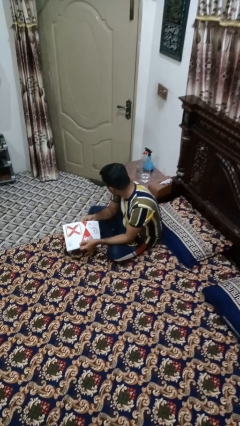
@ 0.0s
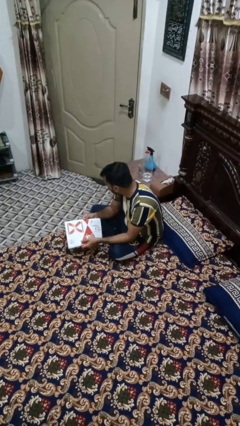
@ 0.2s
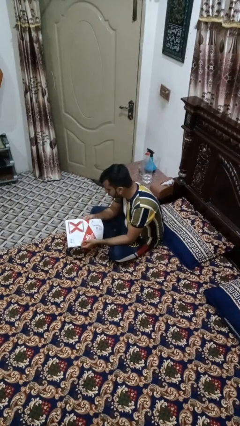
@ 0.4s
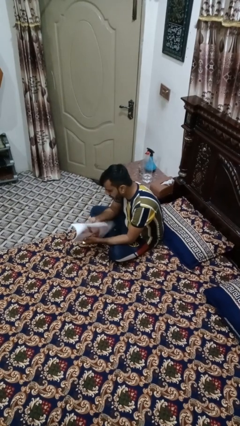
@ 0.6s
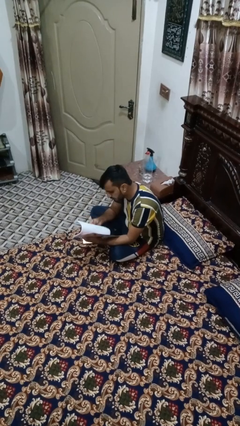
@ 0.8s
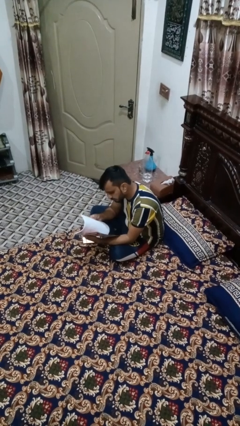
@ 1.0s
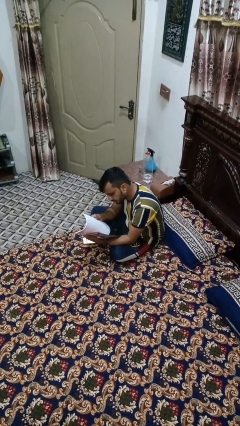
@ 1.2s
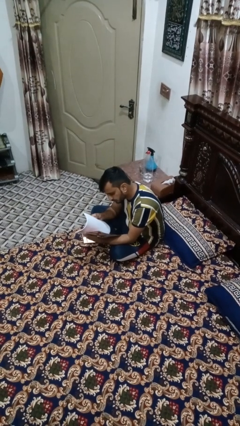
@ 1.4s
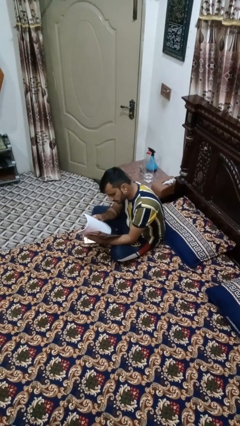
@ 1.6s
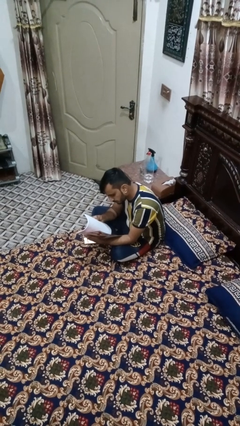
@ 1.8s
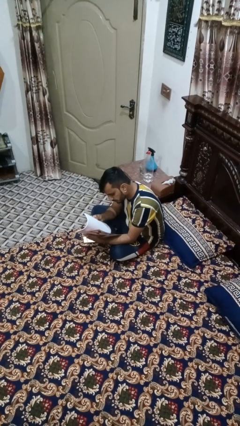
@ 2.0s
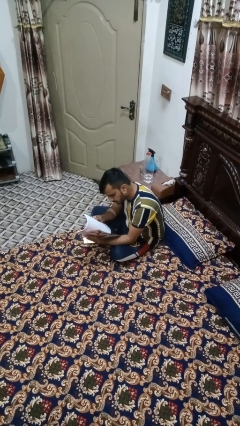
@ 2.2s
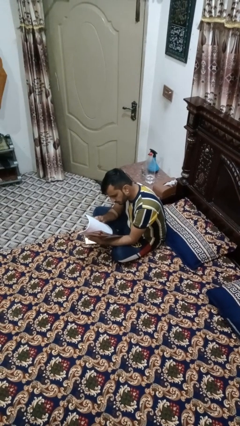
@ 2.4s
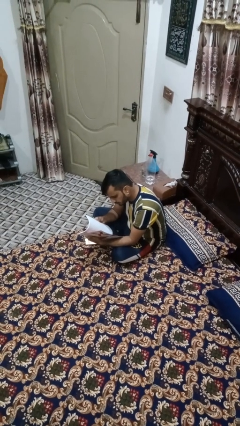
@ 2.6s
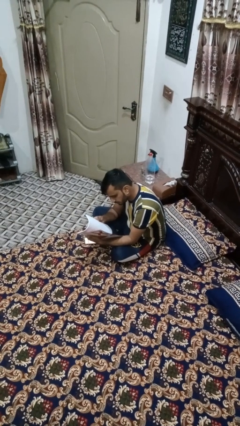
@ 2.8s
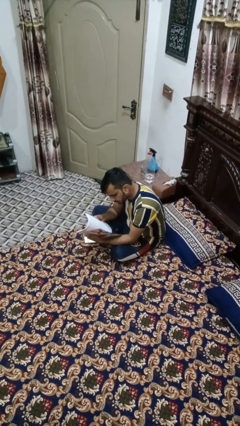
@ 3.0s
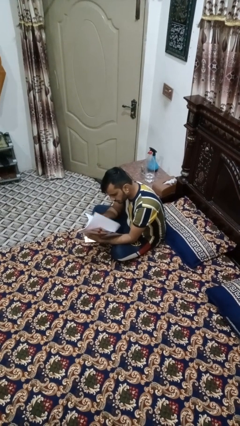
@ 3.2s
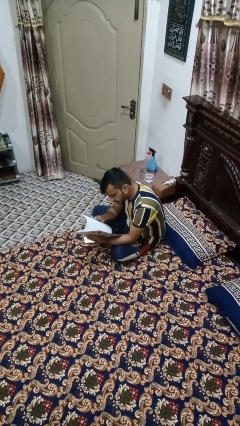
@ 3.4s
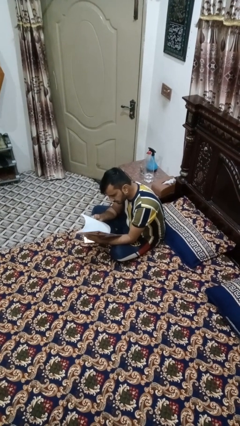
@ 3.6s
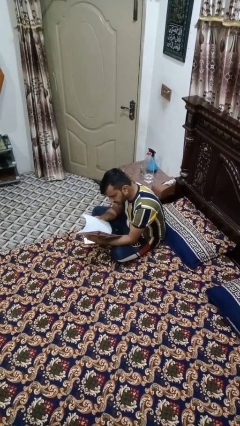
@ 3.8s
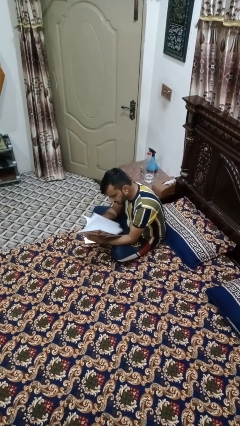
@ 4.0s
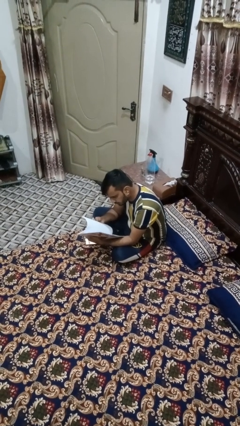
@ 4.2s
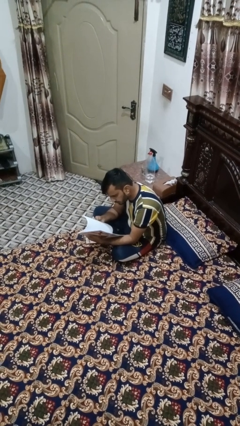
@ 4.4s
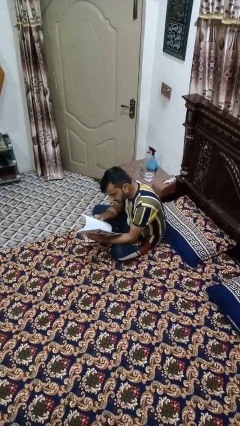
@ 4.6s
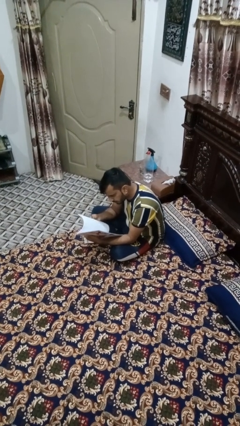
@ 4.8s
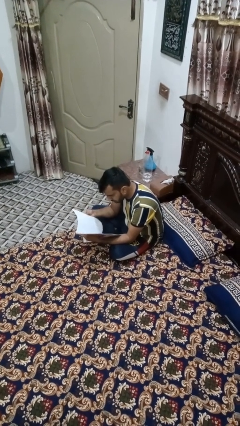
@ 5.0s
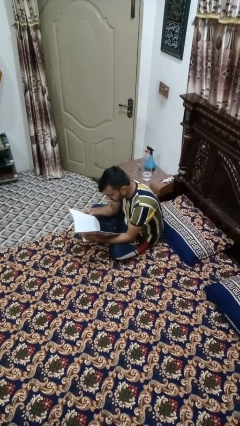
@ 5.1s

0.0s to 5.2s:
person reads magazine

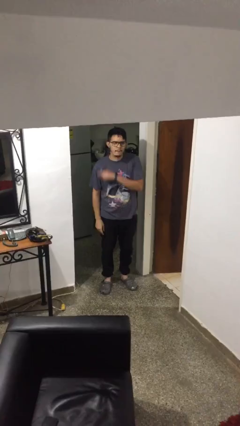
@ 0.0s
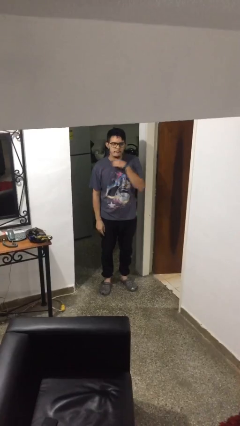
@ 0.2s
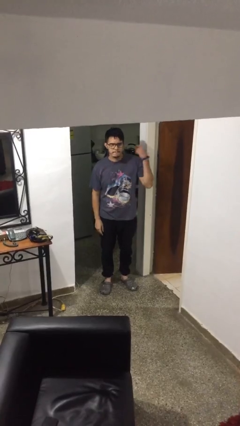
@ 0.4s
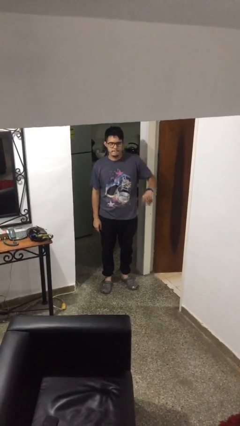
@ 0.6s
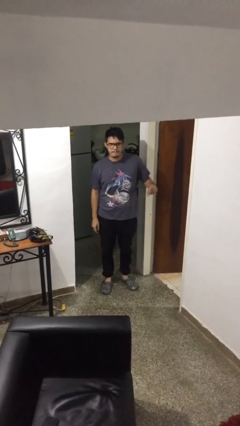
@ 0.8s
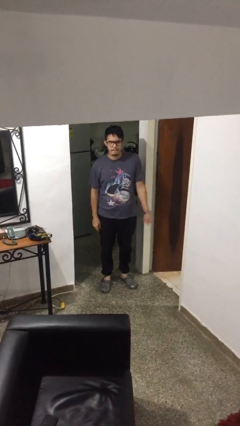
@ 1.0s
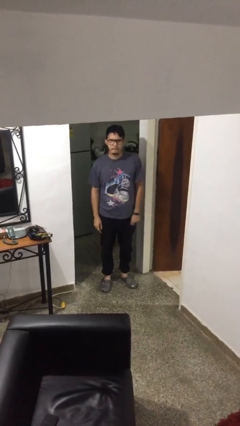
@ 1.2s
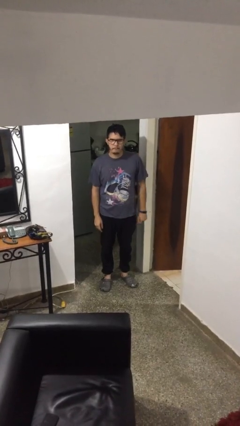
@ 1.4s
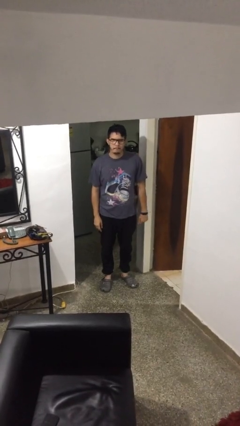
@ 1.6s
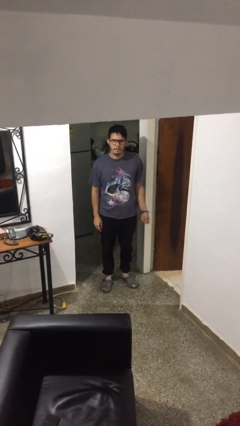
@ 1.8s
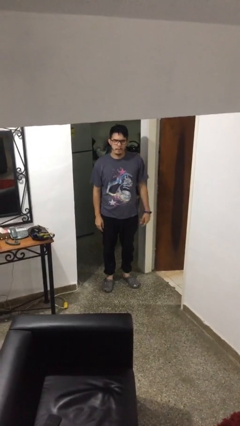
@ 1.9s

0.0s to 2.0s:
person gestures cut

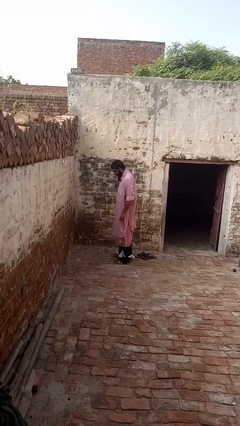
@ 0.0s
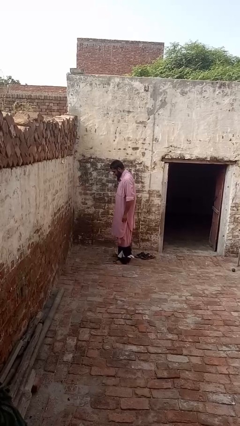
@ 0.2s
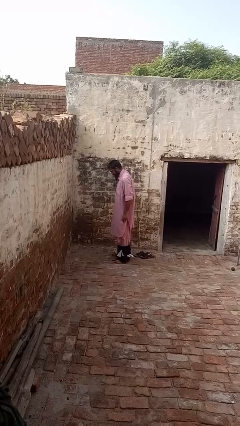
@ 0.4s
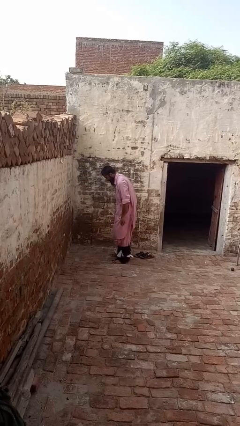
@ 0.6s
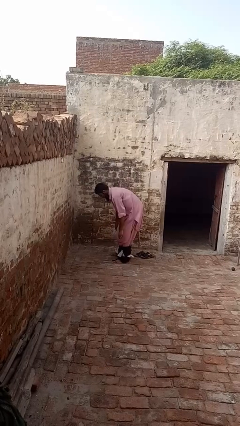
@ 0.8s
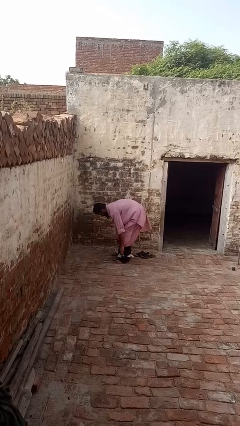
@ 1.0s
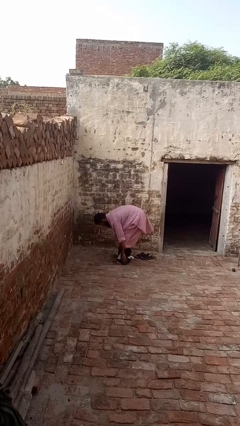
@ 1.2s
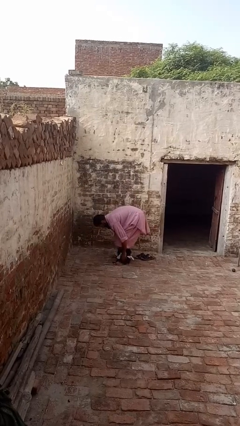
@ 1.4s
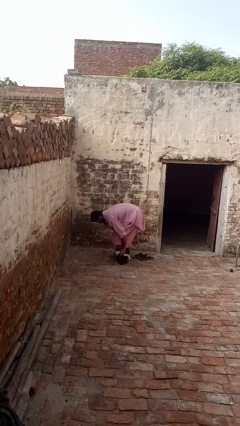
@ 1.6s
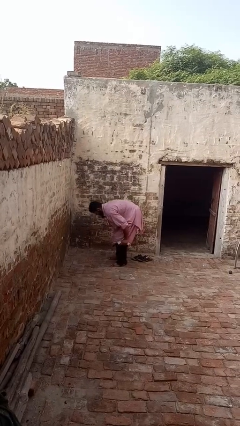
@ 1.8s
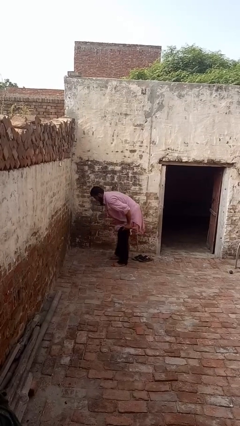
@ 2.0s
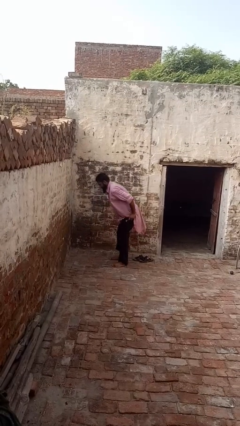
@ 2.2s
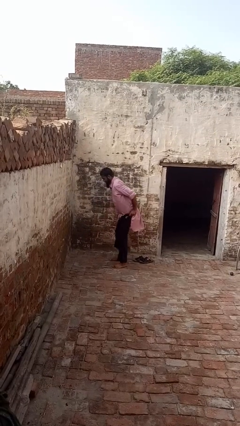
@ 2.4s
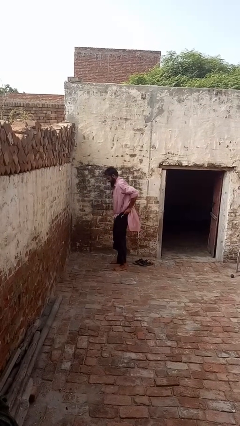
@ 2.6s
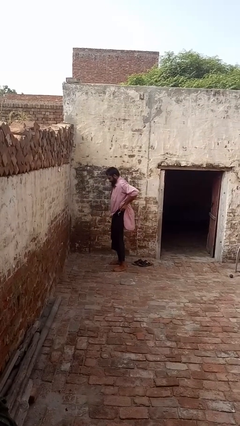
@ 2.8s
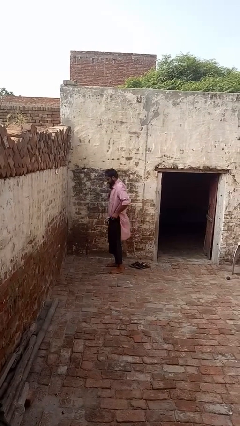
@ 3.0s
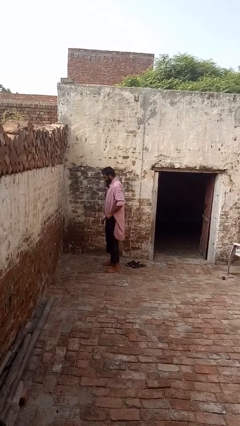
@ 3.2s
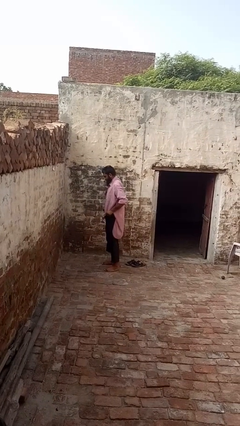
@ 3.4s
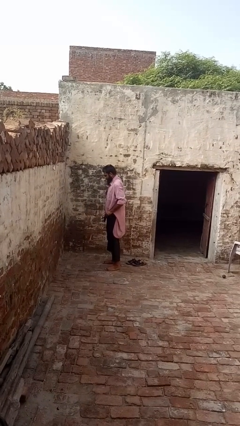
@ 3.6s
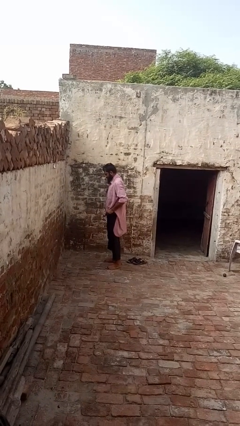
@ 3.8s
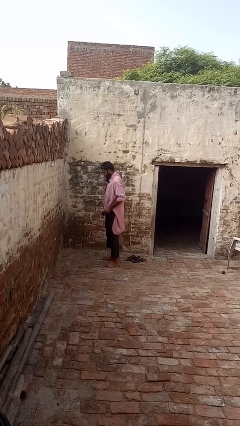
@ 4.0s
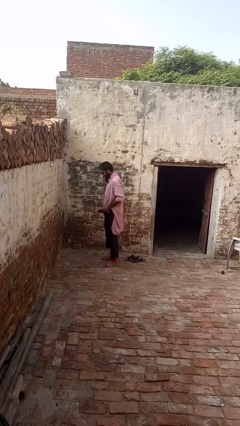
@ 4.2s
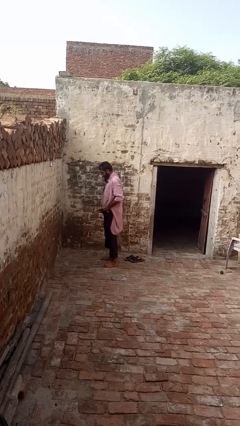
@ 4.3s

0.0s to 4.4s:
person puts on pants

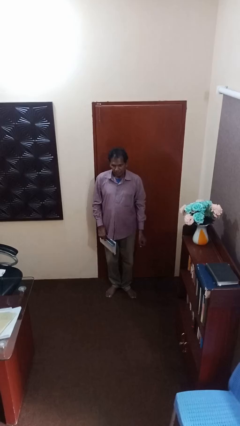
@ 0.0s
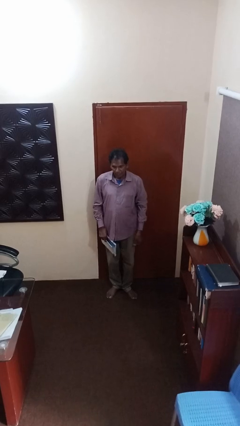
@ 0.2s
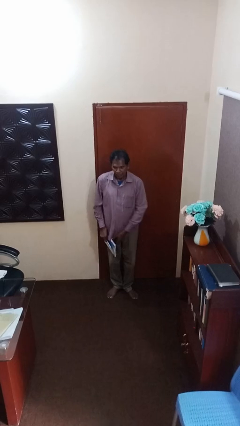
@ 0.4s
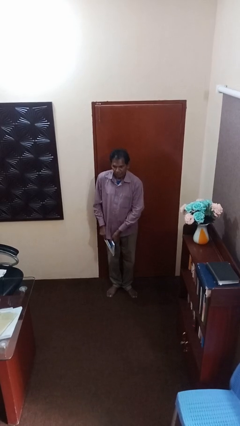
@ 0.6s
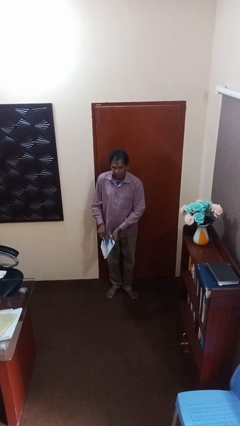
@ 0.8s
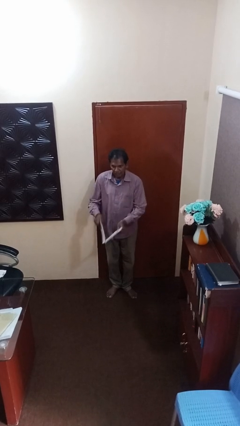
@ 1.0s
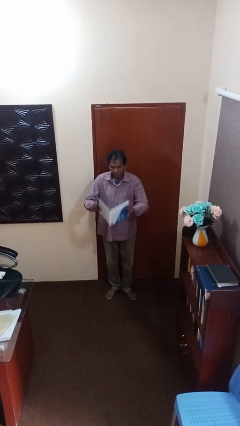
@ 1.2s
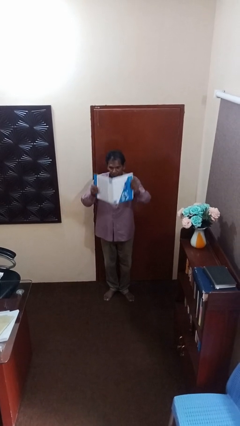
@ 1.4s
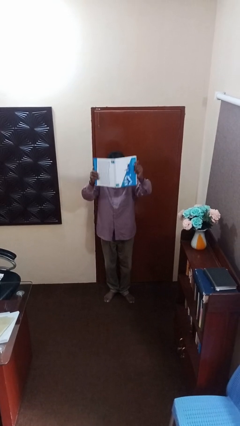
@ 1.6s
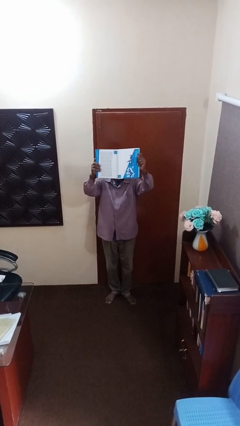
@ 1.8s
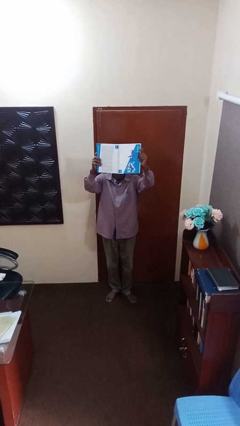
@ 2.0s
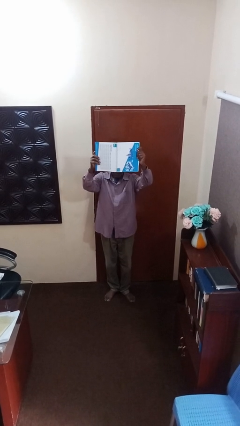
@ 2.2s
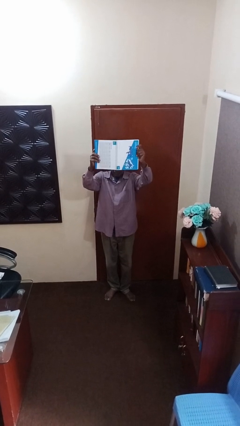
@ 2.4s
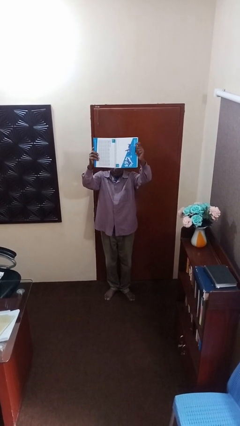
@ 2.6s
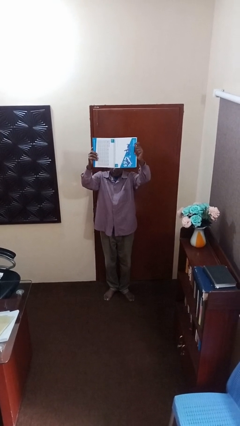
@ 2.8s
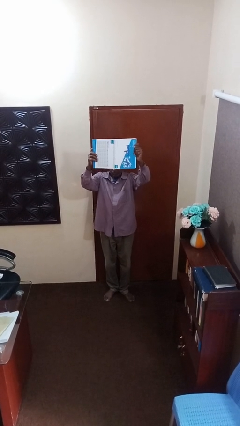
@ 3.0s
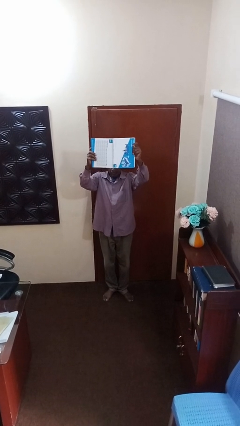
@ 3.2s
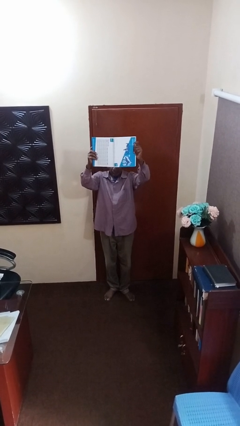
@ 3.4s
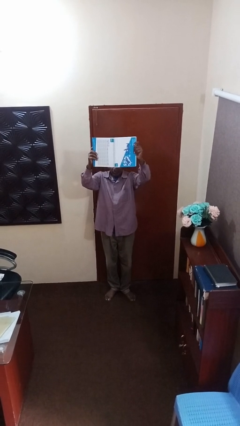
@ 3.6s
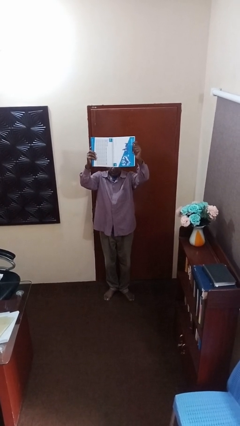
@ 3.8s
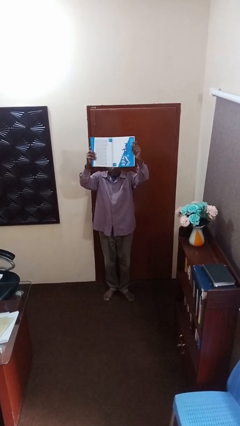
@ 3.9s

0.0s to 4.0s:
person holds object above head

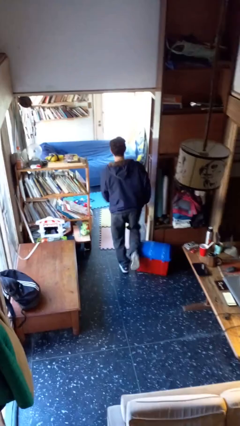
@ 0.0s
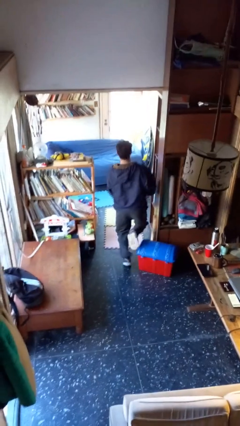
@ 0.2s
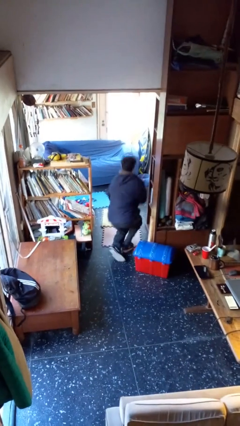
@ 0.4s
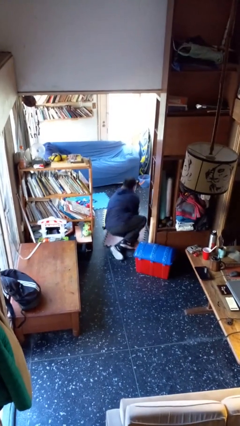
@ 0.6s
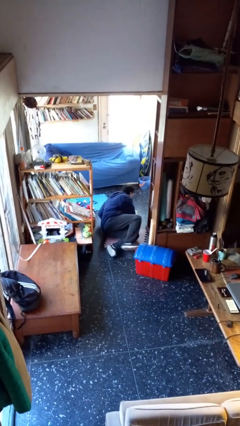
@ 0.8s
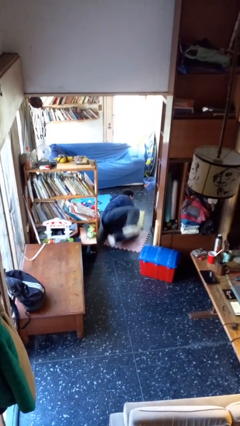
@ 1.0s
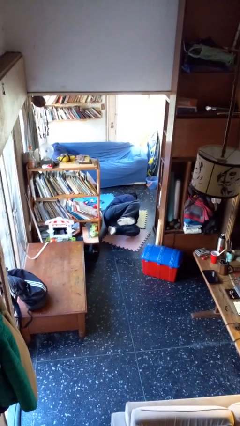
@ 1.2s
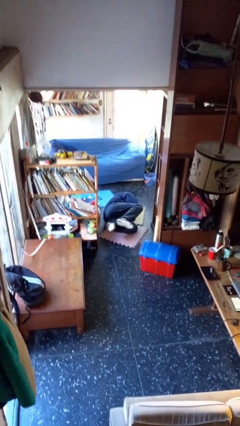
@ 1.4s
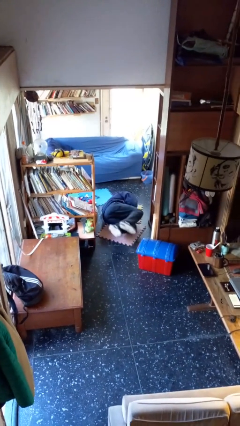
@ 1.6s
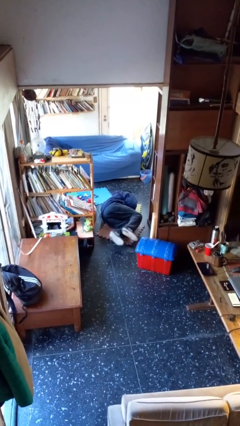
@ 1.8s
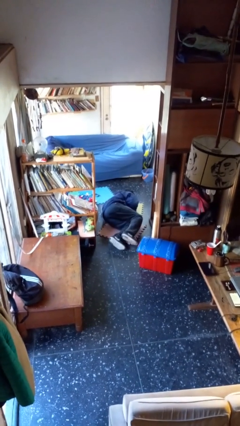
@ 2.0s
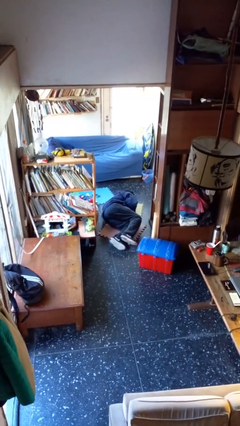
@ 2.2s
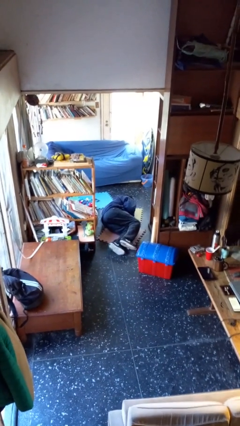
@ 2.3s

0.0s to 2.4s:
person trips on object on floor
